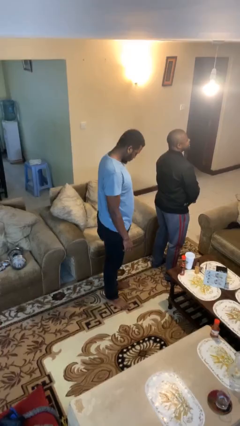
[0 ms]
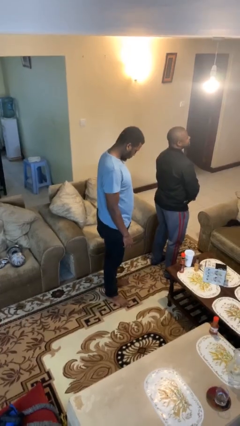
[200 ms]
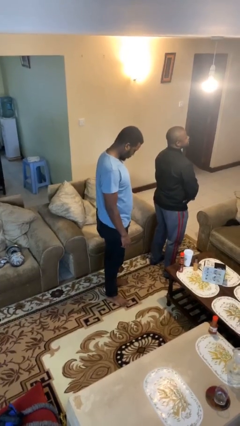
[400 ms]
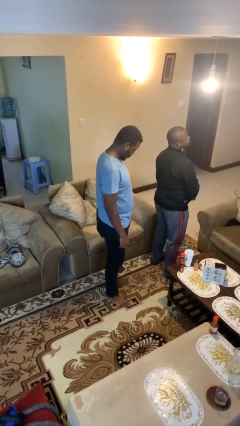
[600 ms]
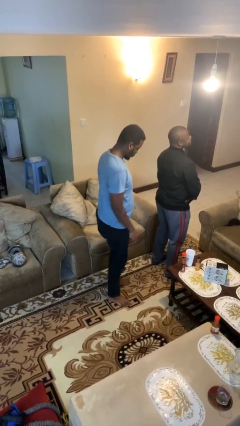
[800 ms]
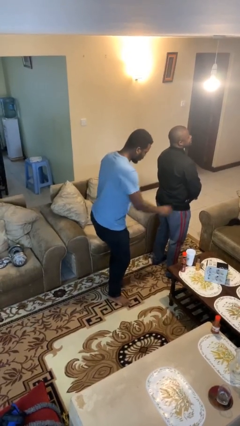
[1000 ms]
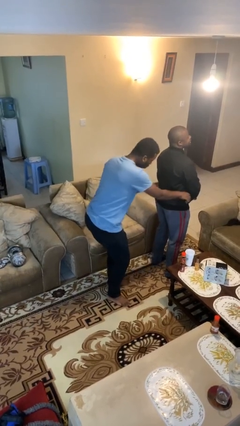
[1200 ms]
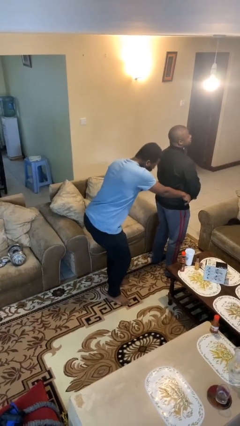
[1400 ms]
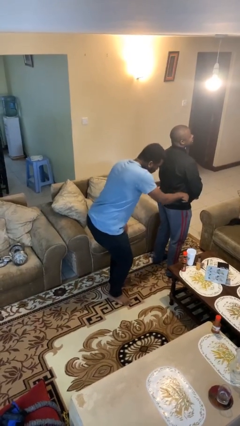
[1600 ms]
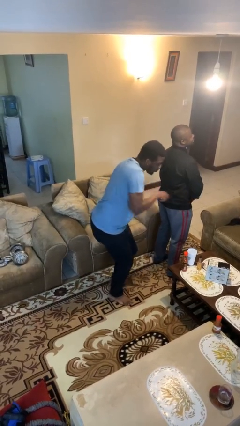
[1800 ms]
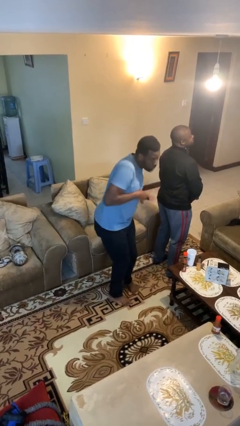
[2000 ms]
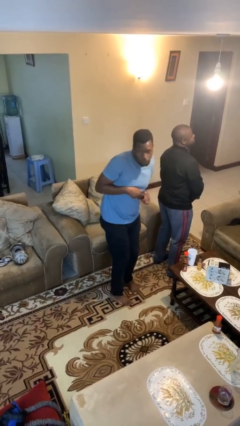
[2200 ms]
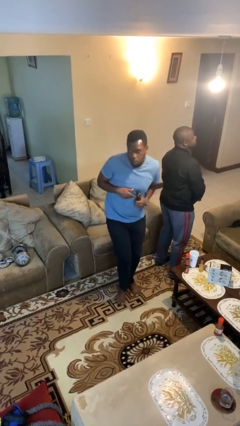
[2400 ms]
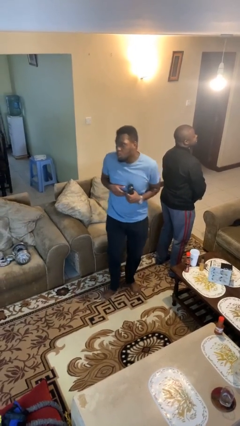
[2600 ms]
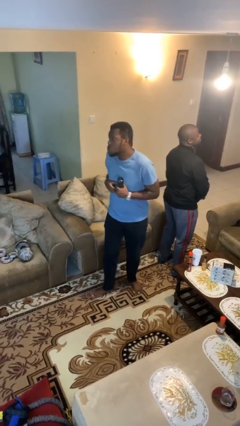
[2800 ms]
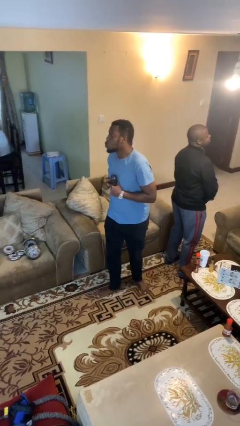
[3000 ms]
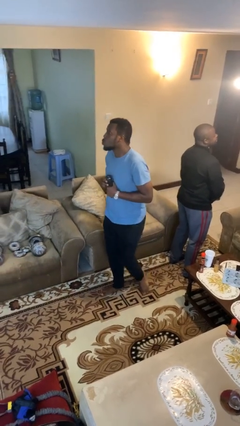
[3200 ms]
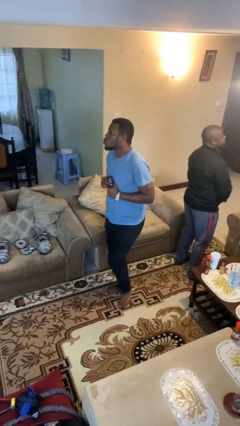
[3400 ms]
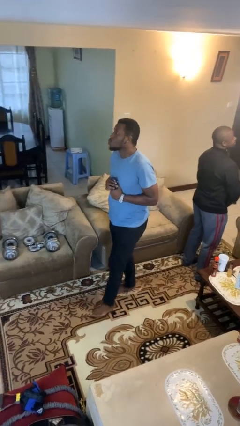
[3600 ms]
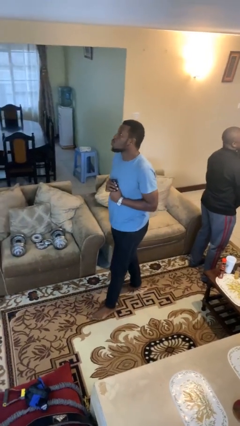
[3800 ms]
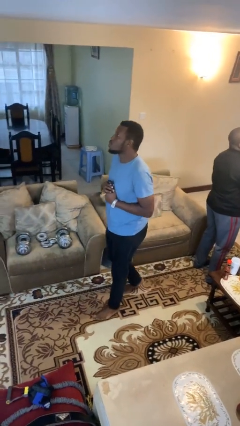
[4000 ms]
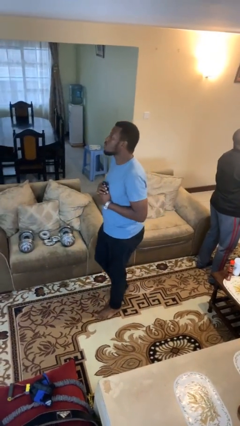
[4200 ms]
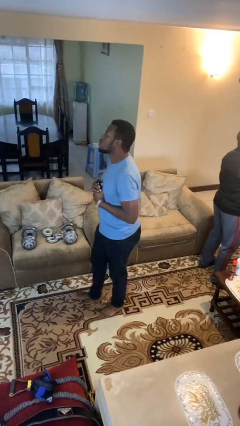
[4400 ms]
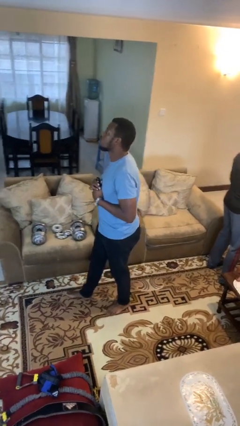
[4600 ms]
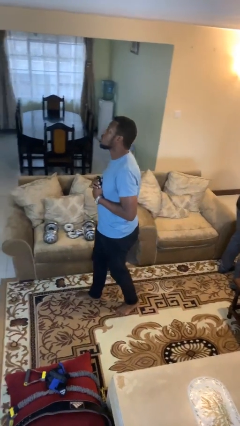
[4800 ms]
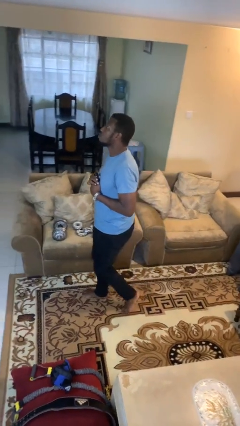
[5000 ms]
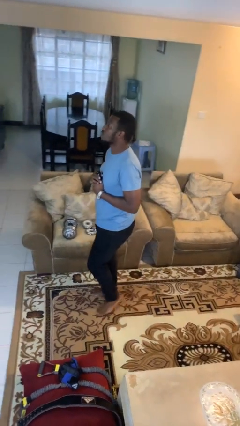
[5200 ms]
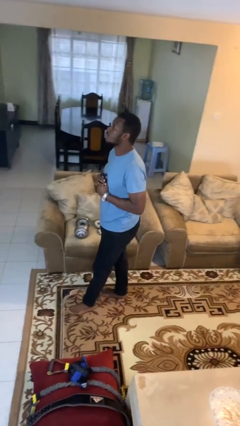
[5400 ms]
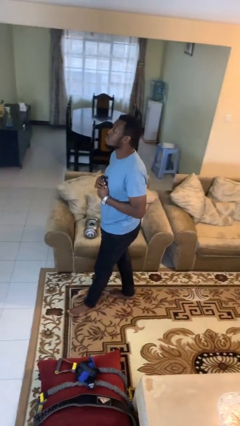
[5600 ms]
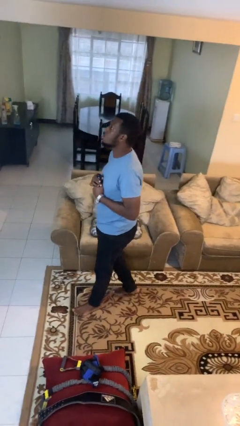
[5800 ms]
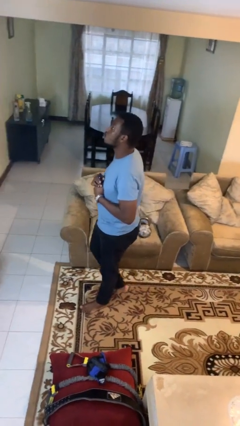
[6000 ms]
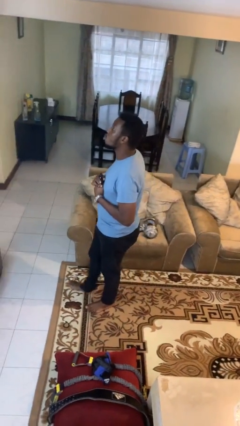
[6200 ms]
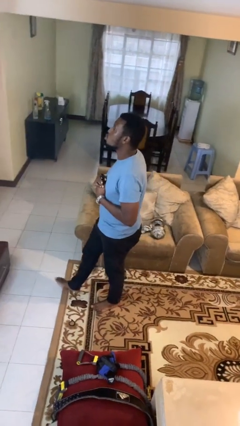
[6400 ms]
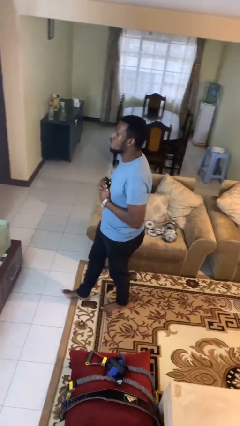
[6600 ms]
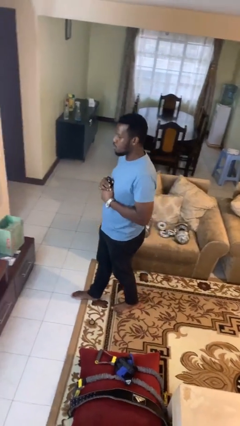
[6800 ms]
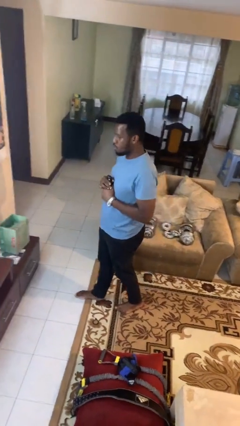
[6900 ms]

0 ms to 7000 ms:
person steals object from person

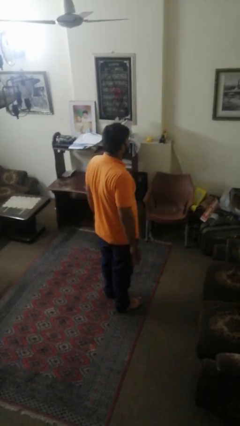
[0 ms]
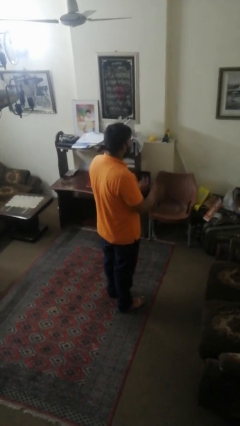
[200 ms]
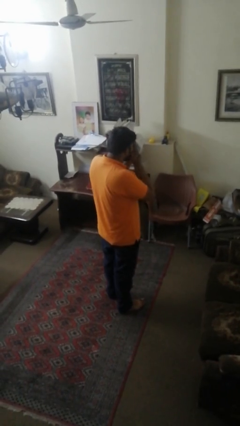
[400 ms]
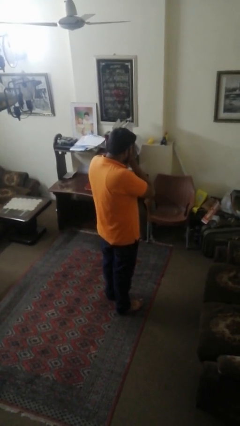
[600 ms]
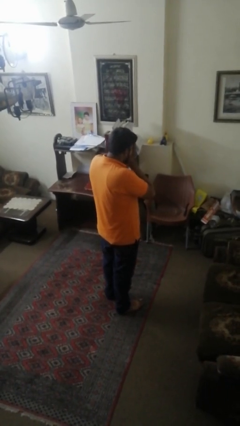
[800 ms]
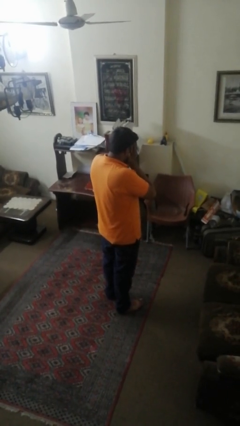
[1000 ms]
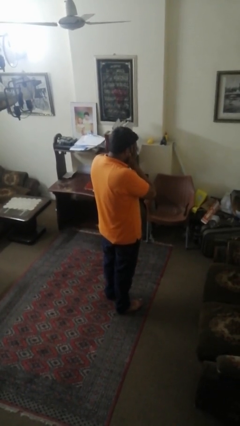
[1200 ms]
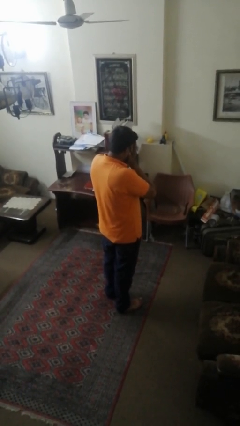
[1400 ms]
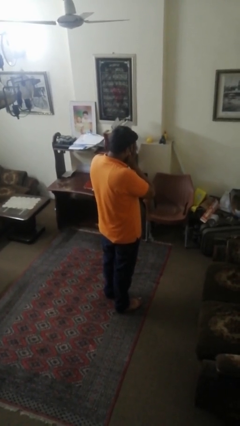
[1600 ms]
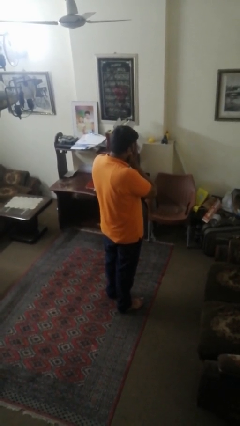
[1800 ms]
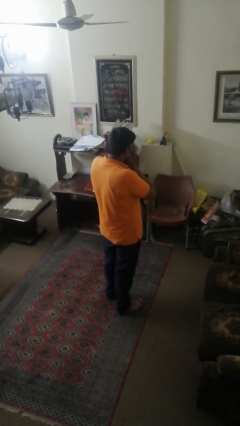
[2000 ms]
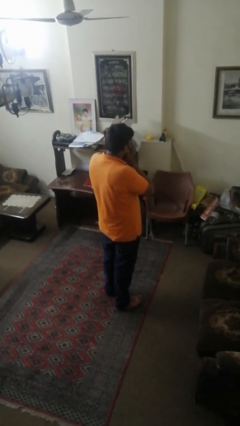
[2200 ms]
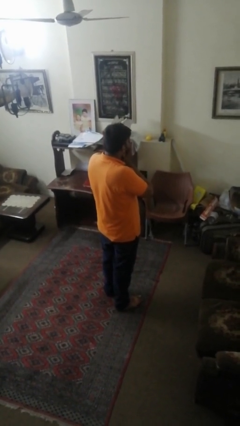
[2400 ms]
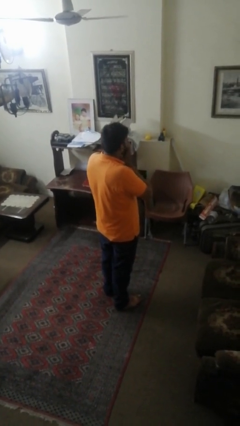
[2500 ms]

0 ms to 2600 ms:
person covers face with hands

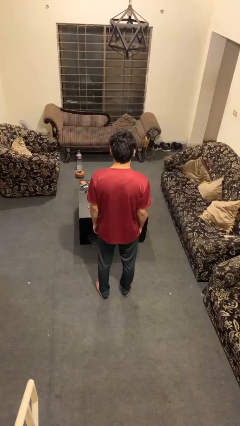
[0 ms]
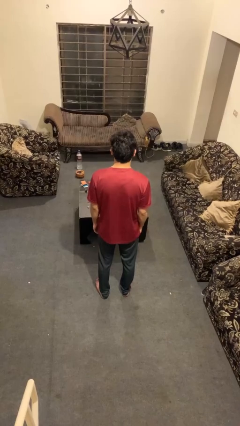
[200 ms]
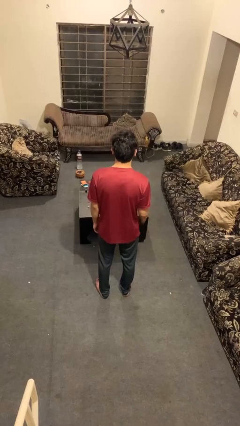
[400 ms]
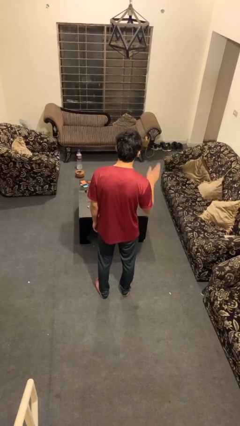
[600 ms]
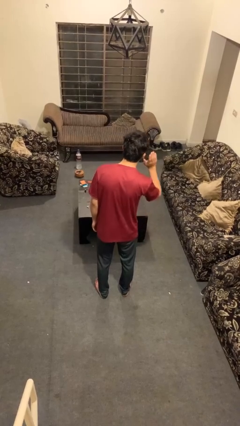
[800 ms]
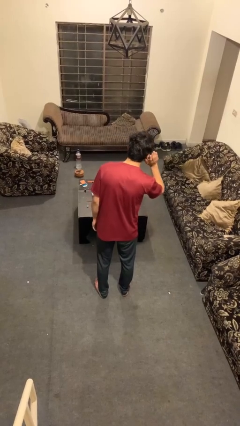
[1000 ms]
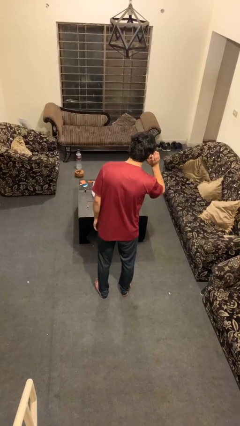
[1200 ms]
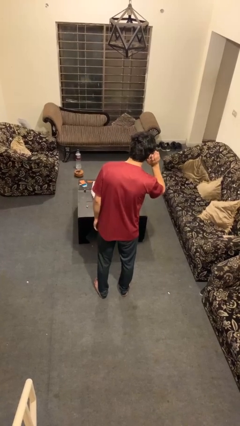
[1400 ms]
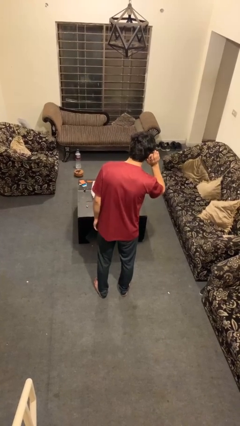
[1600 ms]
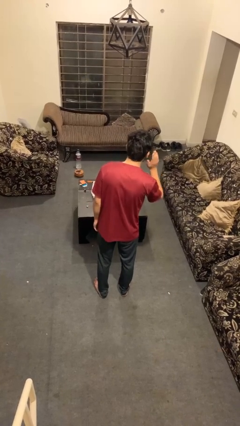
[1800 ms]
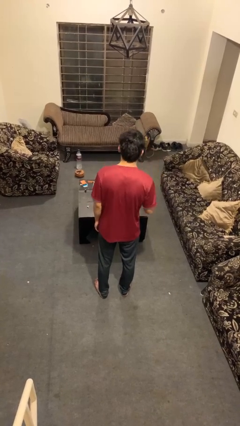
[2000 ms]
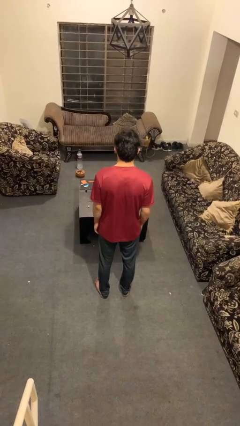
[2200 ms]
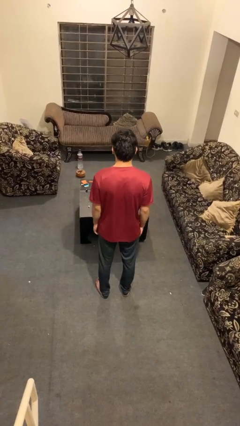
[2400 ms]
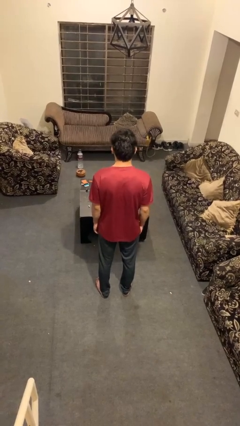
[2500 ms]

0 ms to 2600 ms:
person gestures listen closely

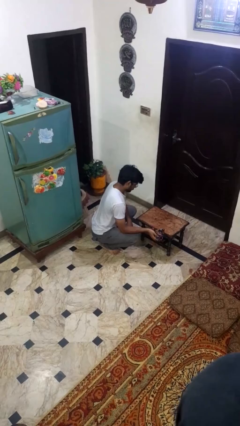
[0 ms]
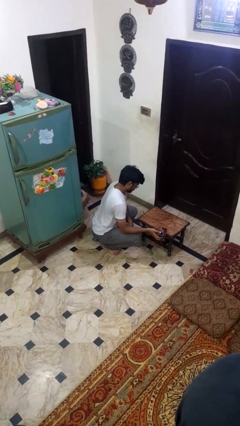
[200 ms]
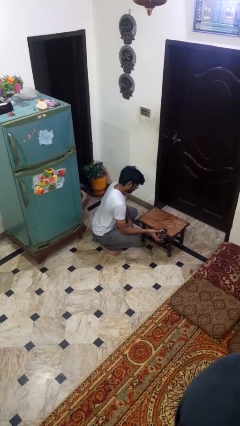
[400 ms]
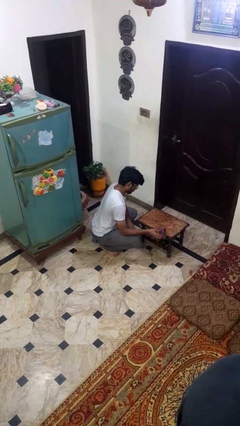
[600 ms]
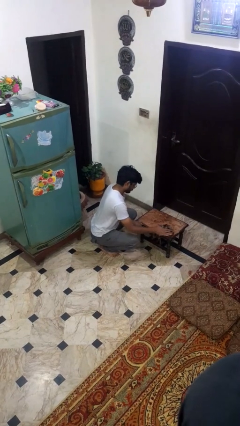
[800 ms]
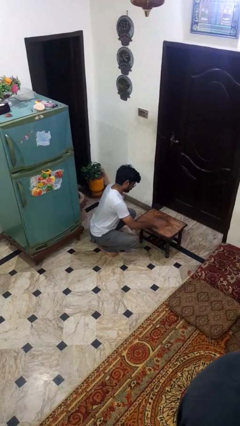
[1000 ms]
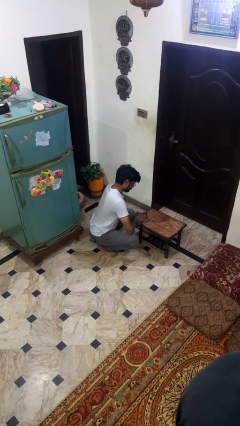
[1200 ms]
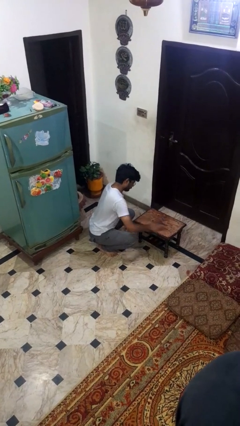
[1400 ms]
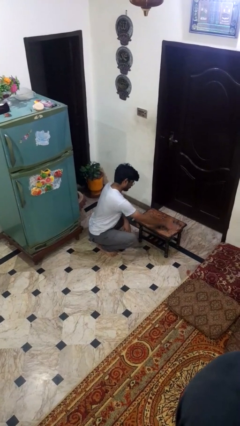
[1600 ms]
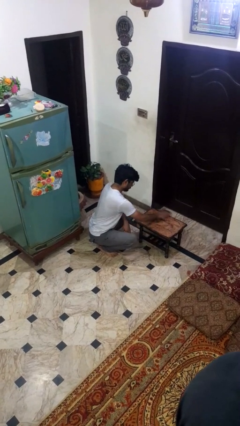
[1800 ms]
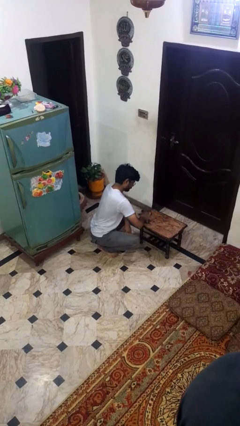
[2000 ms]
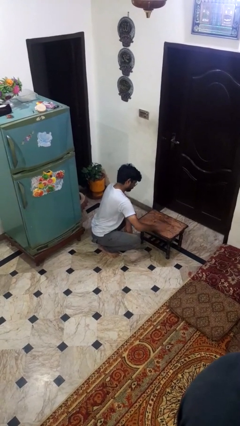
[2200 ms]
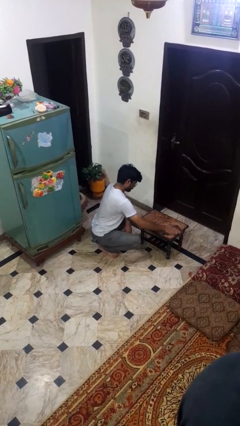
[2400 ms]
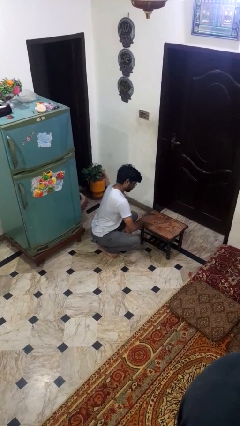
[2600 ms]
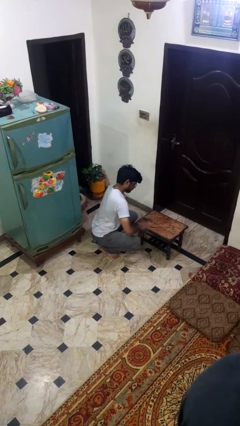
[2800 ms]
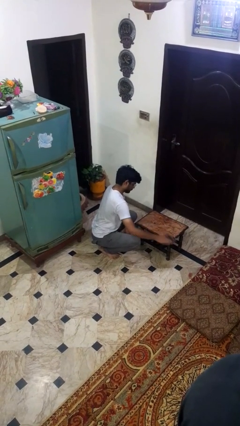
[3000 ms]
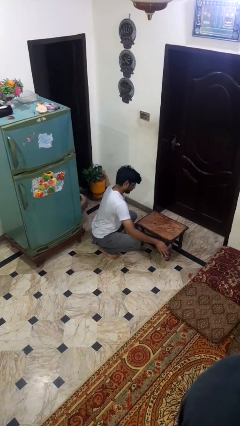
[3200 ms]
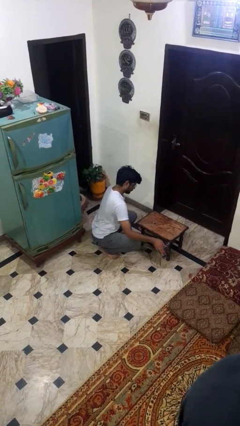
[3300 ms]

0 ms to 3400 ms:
person cleans table with rag

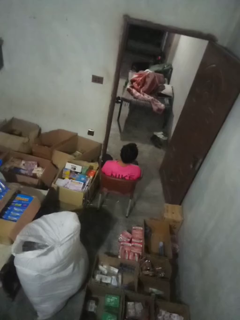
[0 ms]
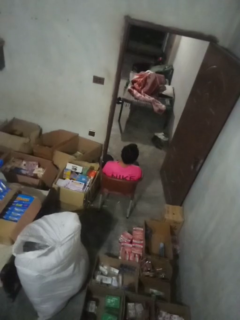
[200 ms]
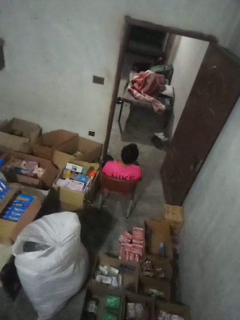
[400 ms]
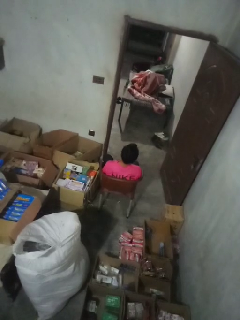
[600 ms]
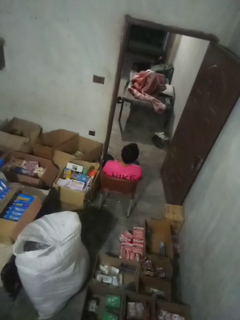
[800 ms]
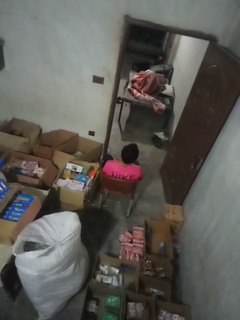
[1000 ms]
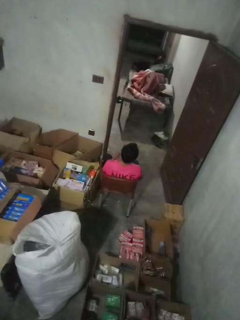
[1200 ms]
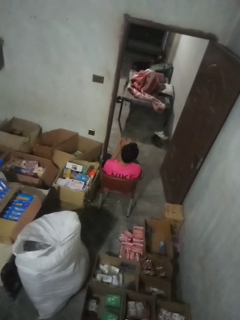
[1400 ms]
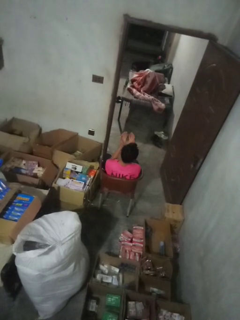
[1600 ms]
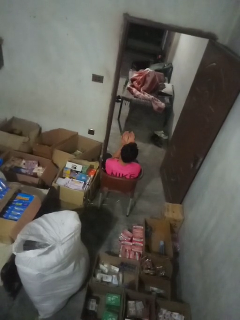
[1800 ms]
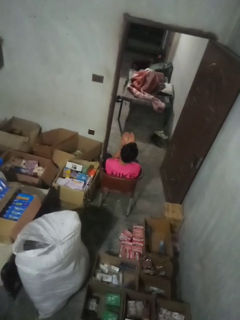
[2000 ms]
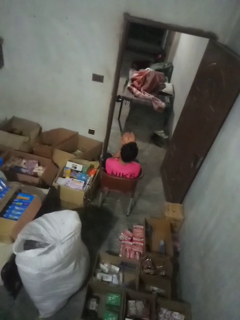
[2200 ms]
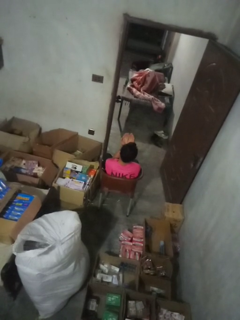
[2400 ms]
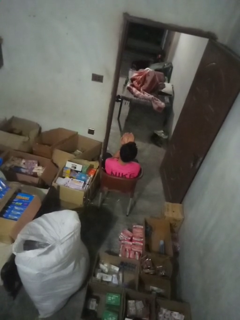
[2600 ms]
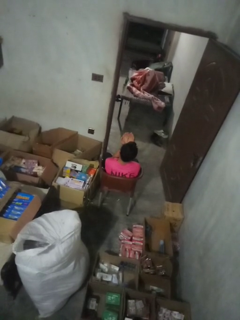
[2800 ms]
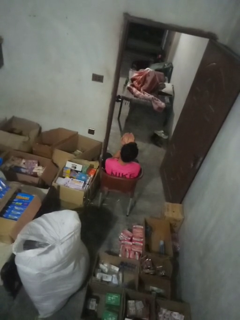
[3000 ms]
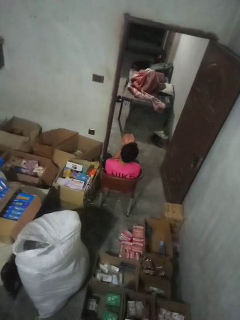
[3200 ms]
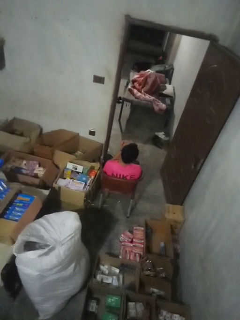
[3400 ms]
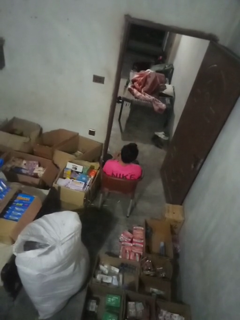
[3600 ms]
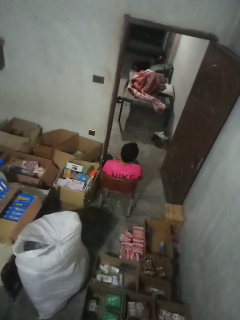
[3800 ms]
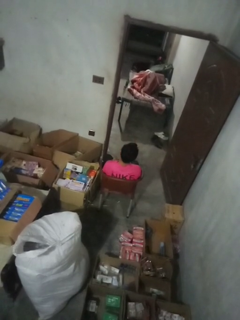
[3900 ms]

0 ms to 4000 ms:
person prays
